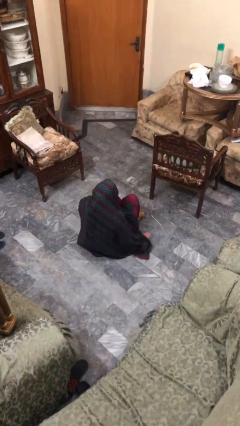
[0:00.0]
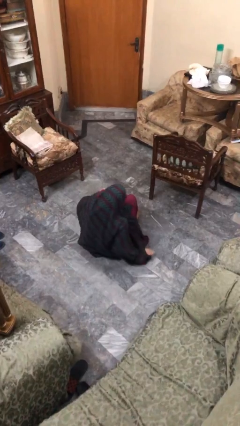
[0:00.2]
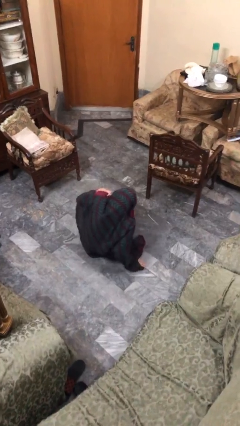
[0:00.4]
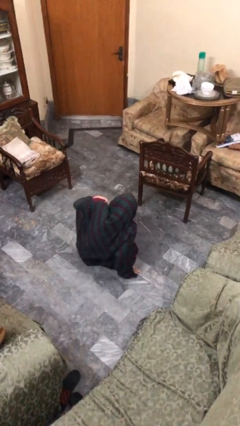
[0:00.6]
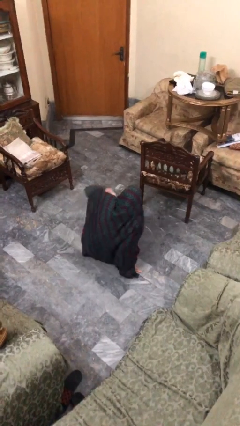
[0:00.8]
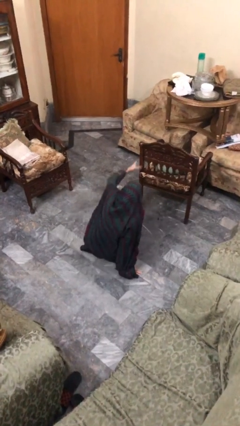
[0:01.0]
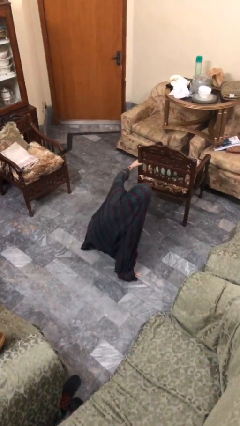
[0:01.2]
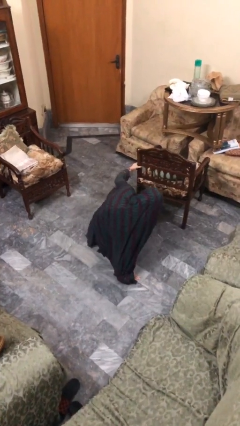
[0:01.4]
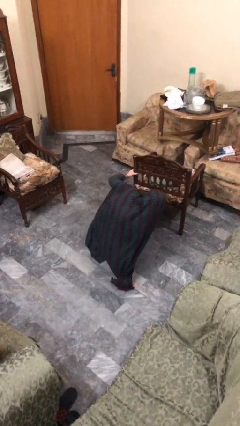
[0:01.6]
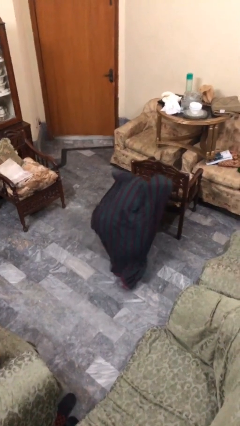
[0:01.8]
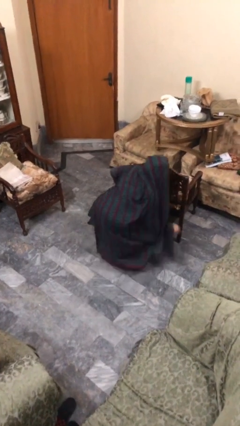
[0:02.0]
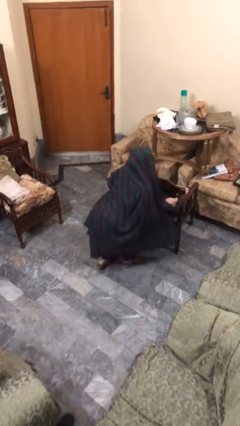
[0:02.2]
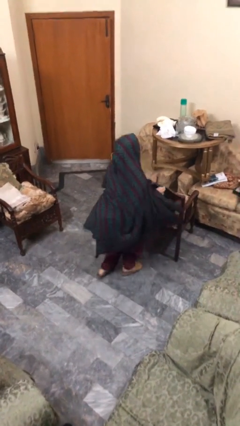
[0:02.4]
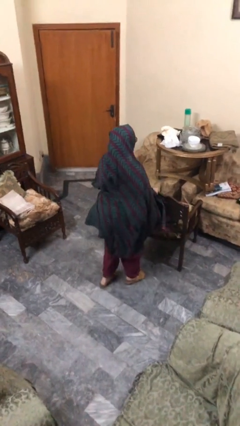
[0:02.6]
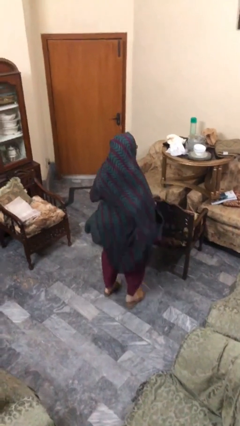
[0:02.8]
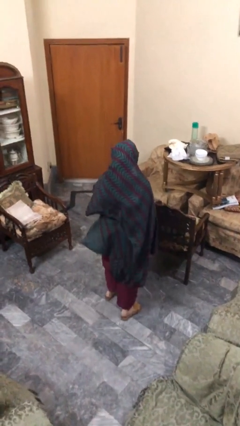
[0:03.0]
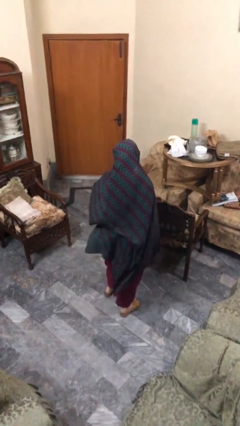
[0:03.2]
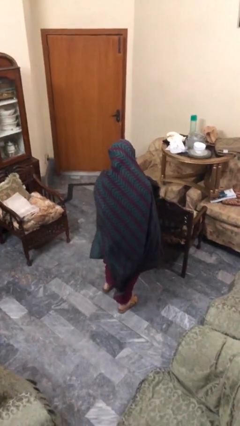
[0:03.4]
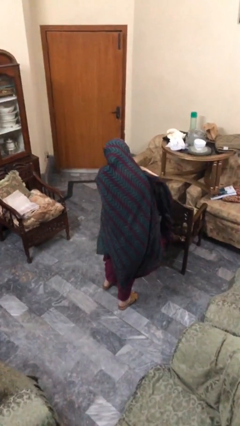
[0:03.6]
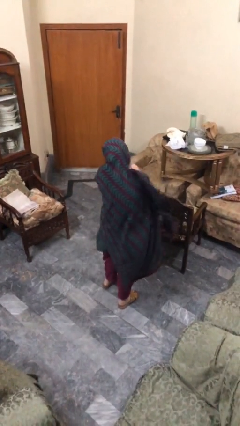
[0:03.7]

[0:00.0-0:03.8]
person stands up from floor

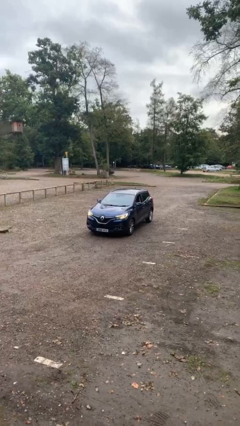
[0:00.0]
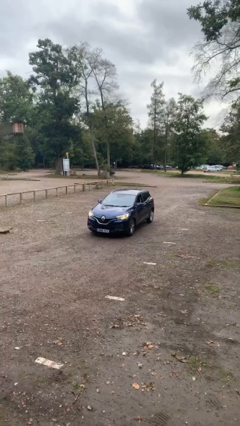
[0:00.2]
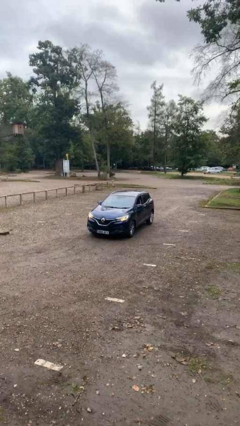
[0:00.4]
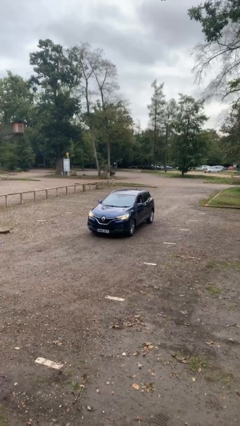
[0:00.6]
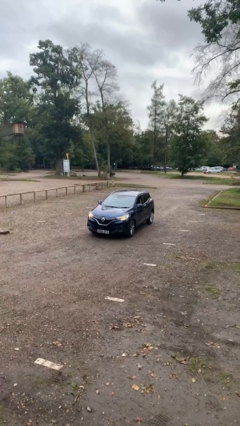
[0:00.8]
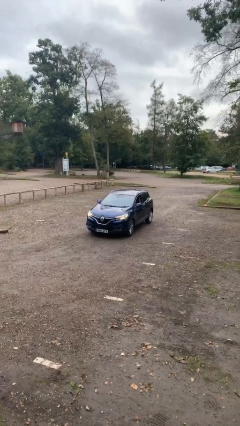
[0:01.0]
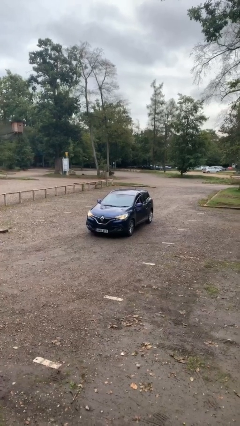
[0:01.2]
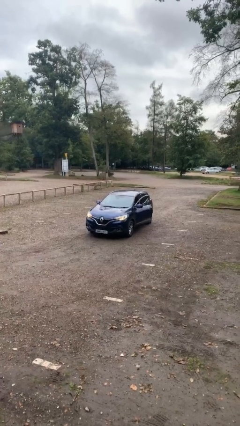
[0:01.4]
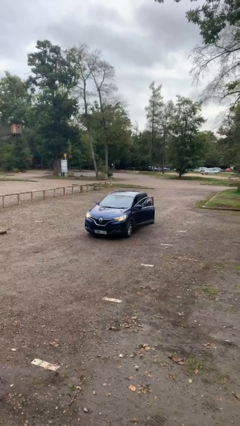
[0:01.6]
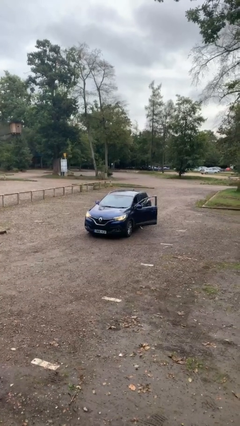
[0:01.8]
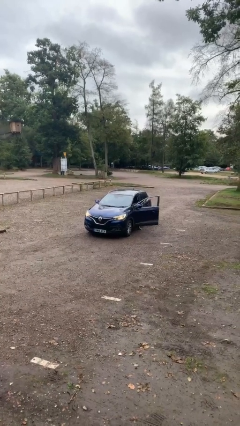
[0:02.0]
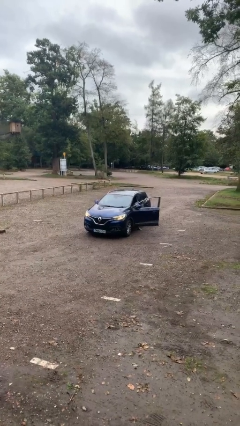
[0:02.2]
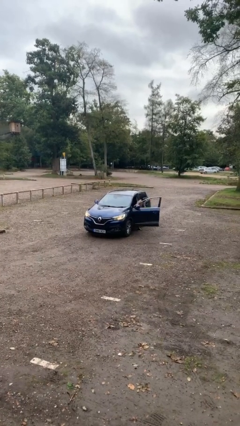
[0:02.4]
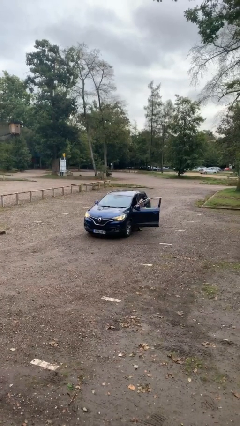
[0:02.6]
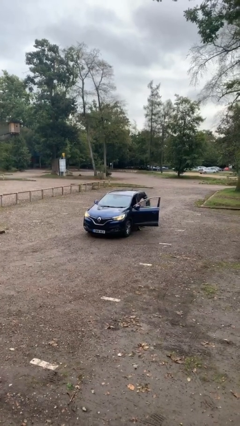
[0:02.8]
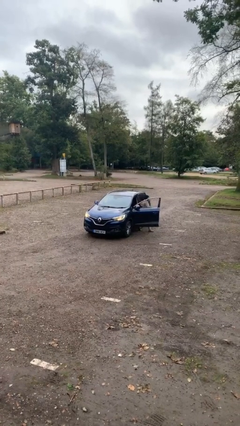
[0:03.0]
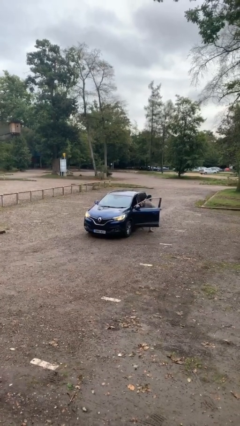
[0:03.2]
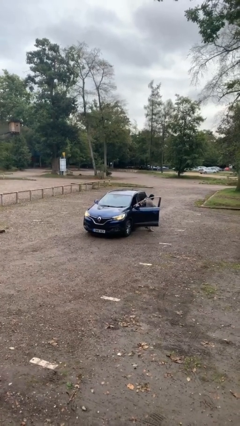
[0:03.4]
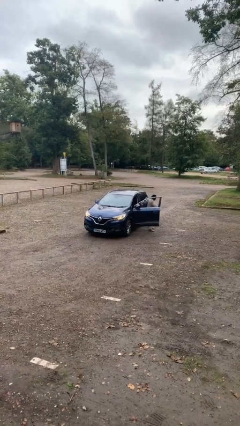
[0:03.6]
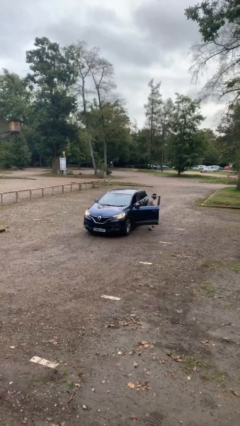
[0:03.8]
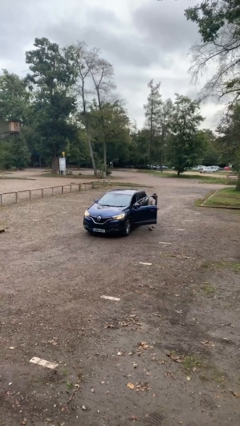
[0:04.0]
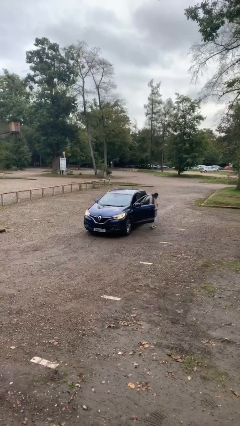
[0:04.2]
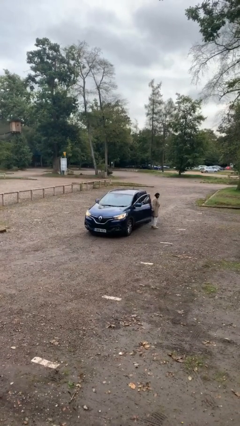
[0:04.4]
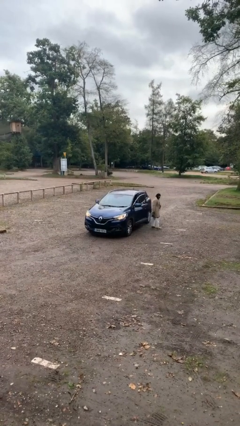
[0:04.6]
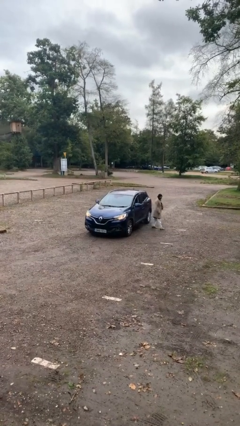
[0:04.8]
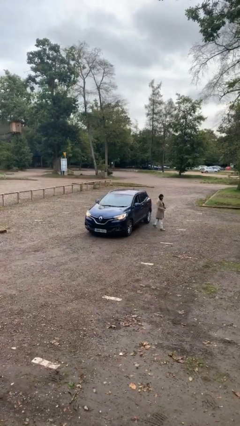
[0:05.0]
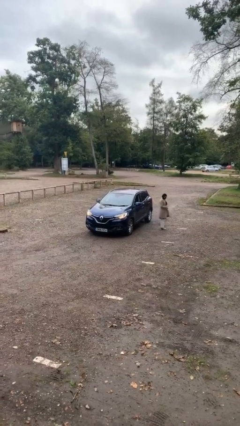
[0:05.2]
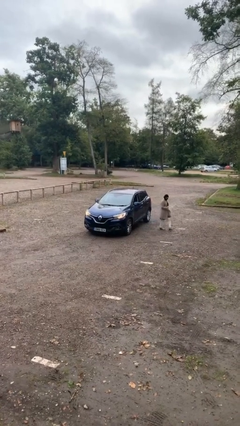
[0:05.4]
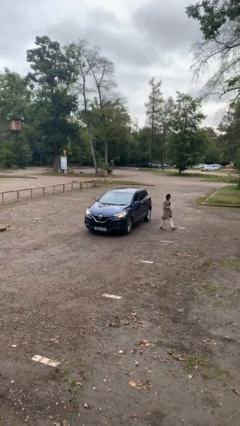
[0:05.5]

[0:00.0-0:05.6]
car drops off person

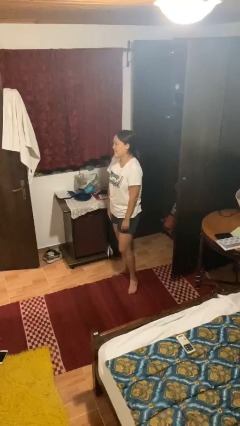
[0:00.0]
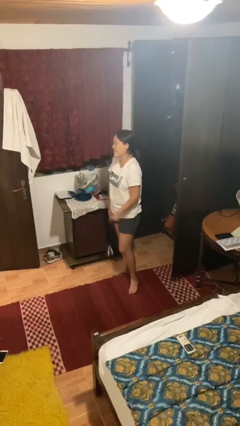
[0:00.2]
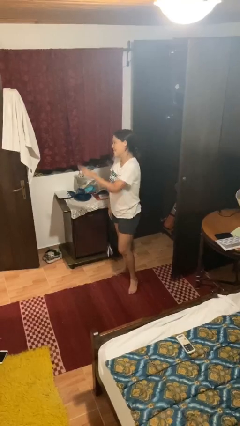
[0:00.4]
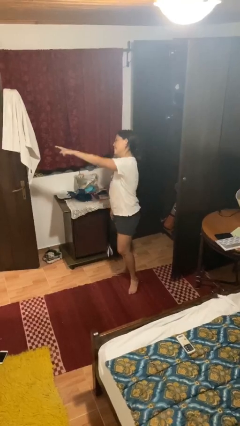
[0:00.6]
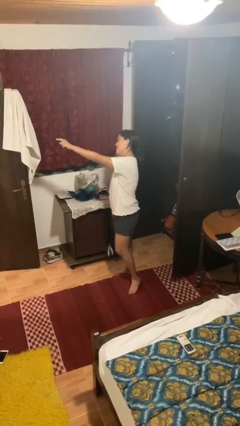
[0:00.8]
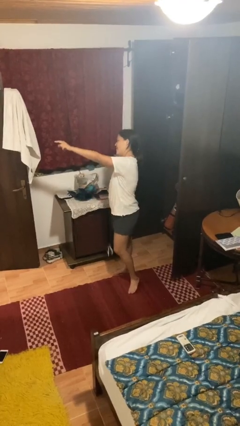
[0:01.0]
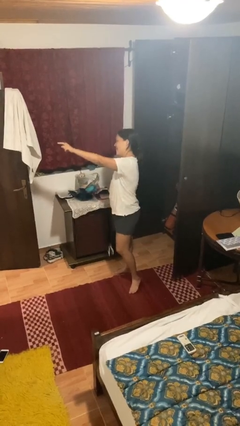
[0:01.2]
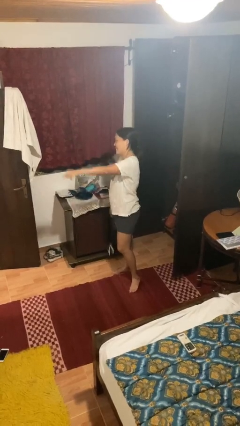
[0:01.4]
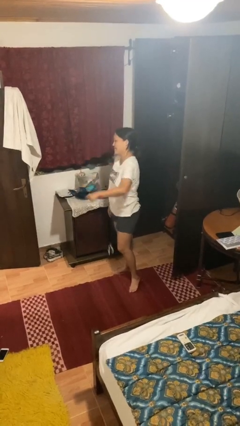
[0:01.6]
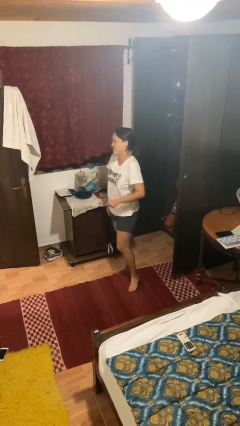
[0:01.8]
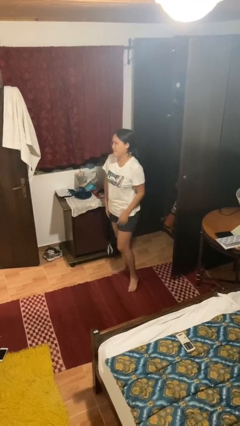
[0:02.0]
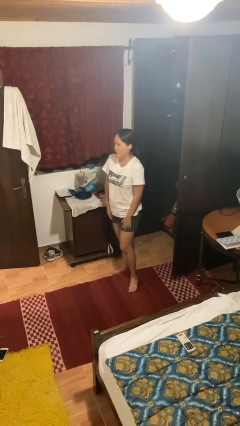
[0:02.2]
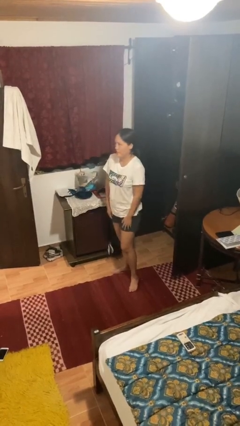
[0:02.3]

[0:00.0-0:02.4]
person points at person

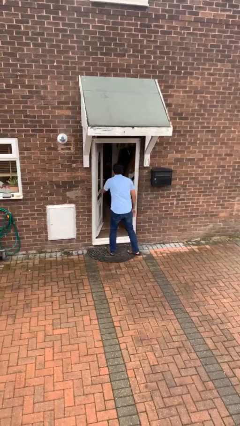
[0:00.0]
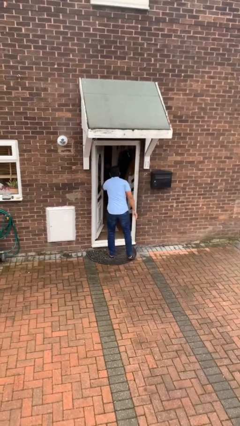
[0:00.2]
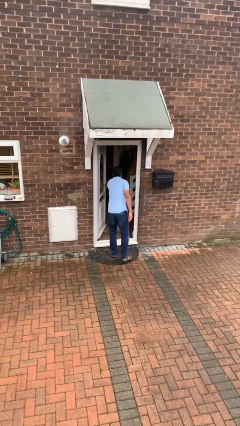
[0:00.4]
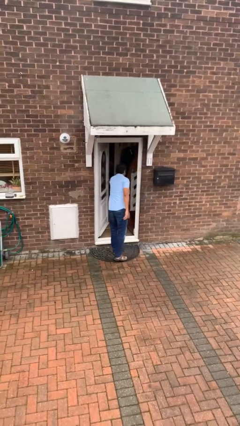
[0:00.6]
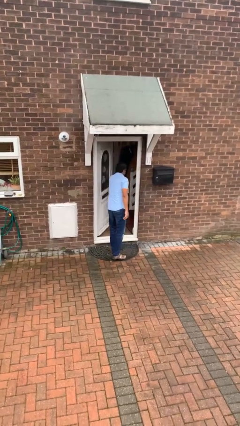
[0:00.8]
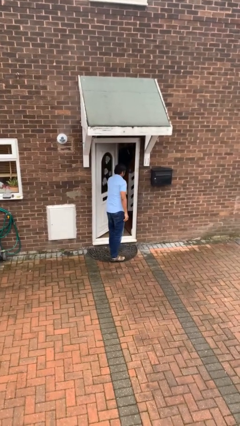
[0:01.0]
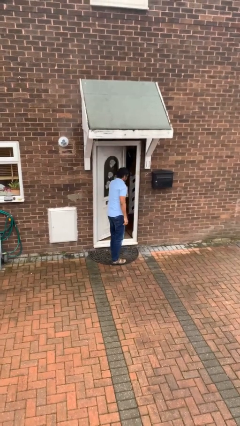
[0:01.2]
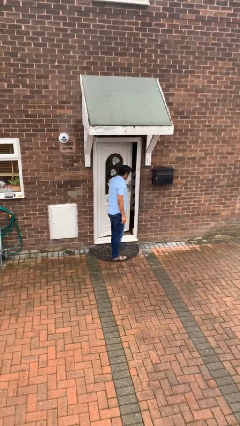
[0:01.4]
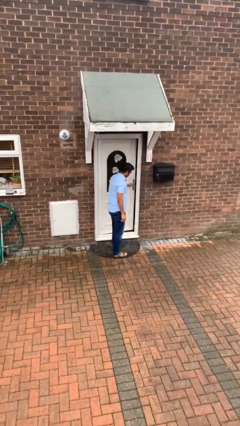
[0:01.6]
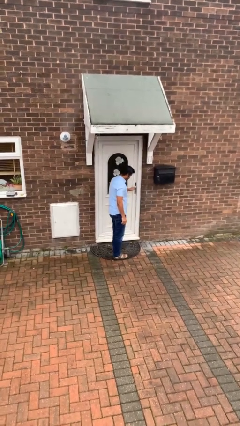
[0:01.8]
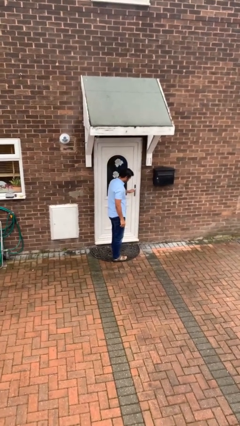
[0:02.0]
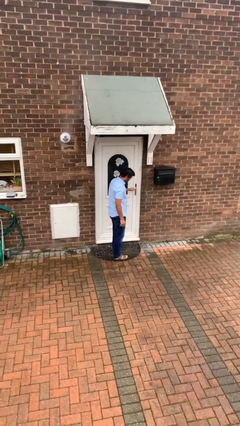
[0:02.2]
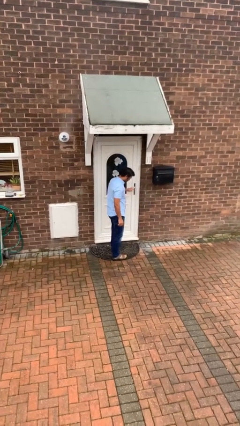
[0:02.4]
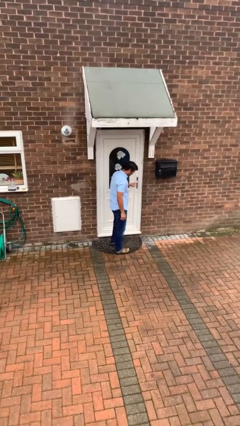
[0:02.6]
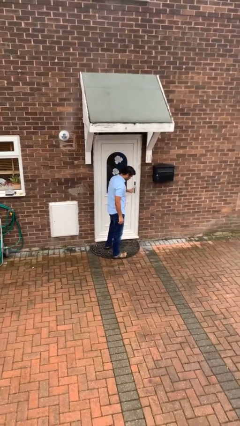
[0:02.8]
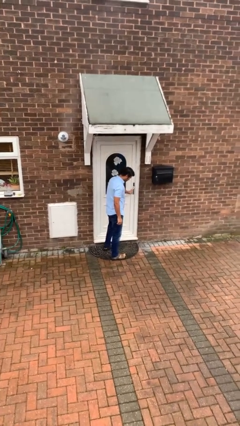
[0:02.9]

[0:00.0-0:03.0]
person closes facility door

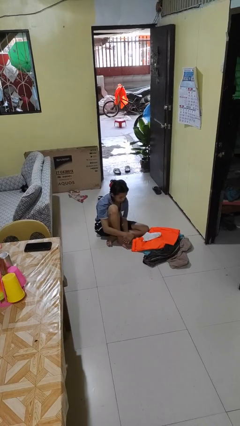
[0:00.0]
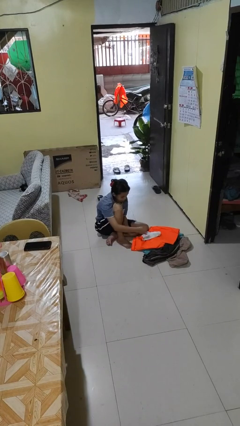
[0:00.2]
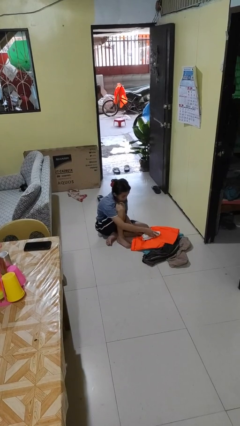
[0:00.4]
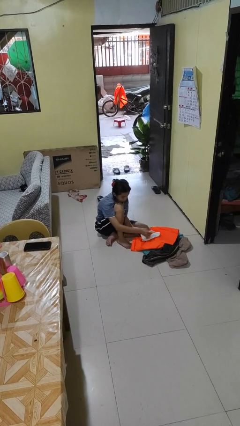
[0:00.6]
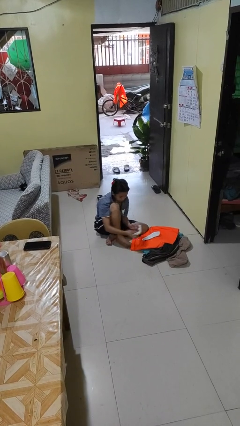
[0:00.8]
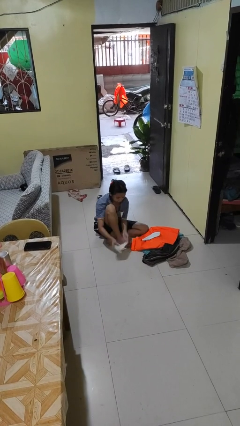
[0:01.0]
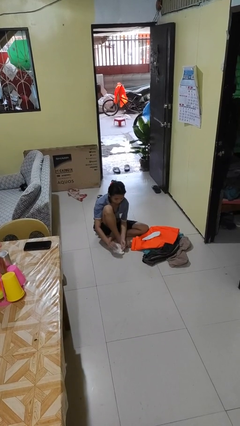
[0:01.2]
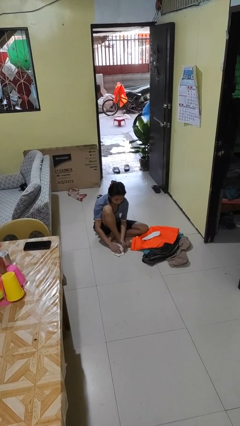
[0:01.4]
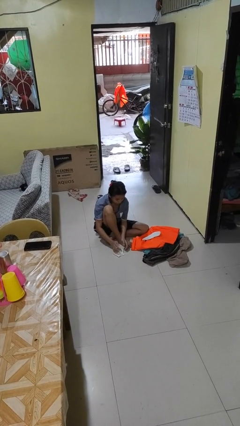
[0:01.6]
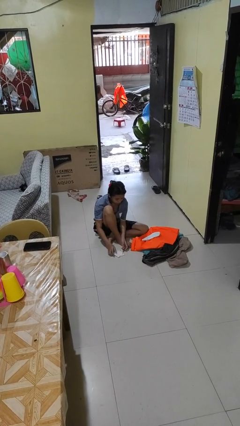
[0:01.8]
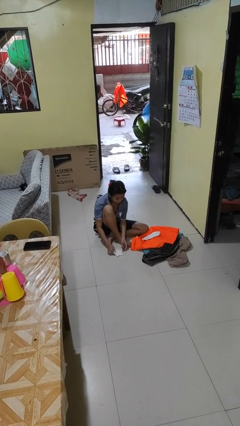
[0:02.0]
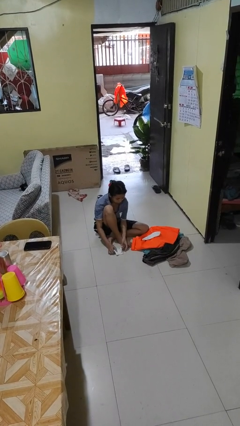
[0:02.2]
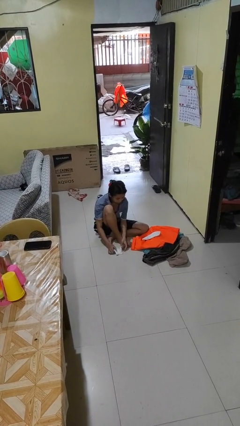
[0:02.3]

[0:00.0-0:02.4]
person folds socks

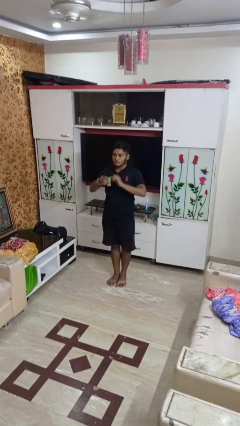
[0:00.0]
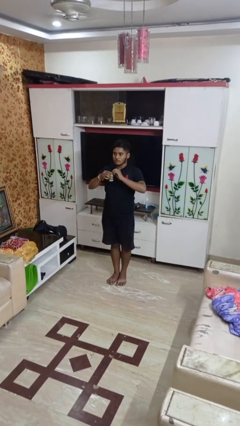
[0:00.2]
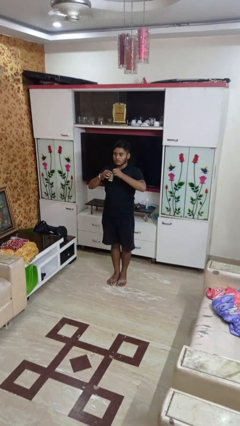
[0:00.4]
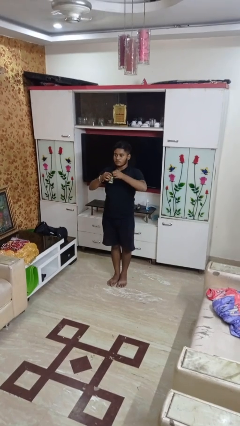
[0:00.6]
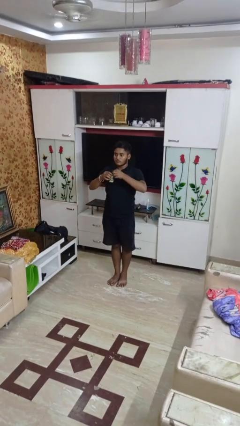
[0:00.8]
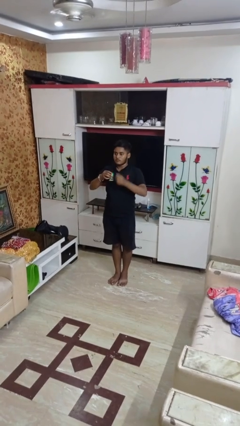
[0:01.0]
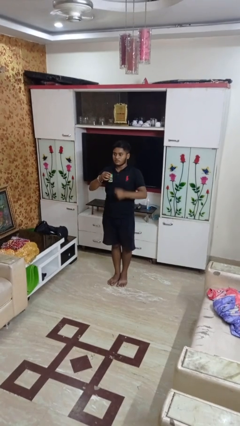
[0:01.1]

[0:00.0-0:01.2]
person opens beverage can
